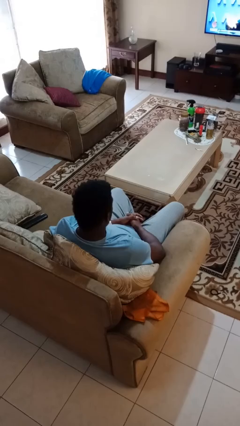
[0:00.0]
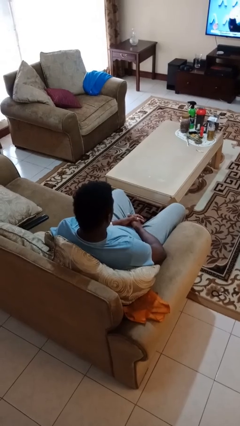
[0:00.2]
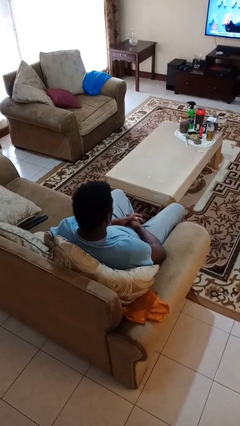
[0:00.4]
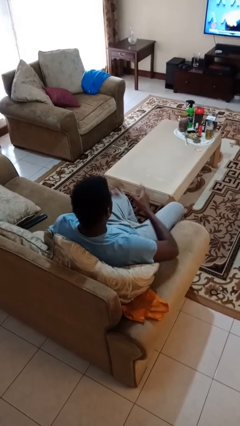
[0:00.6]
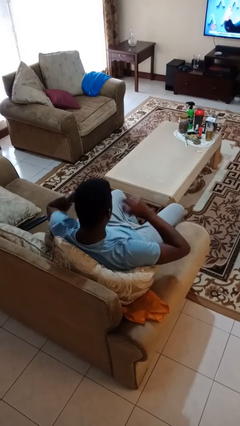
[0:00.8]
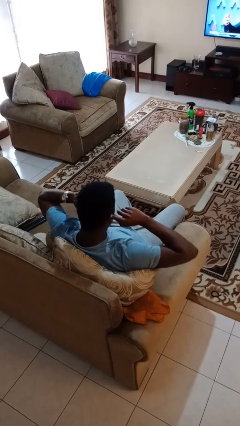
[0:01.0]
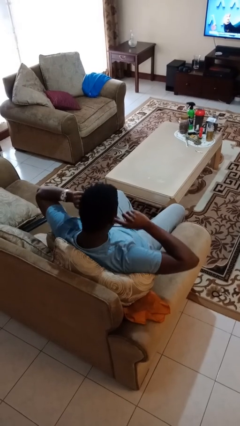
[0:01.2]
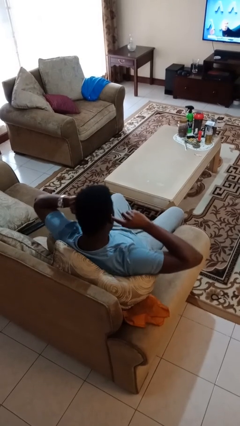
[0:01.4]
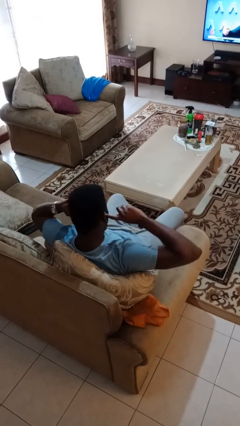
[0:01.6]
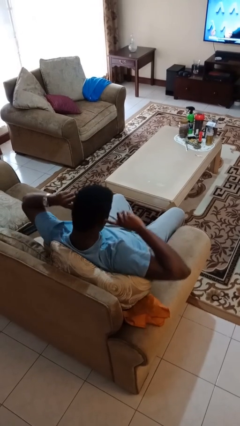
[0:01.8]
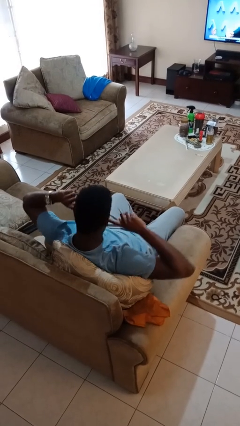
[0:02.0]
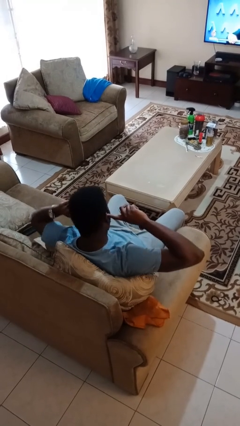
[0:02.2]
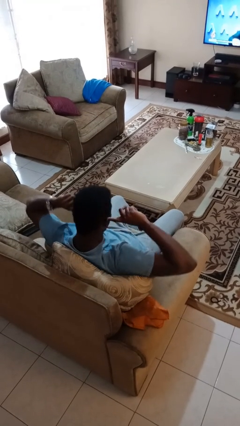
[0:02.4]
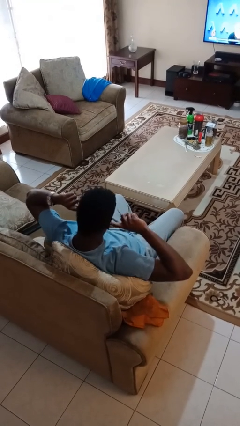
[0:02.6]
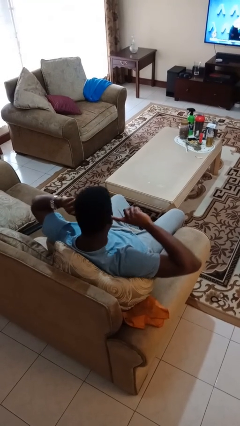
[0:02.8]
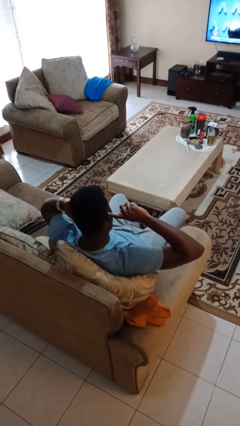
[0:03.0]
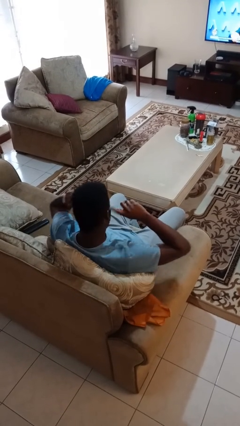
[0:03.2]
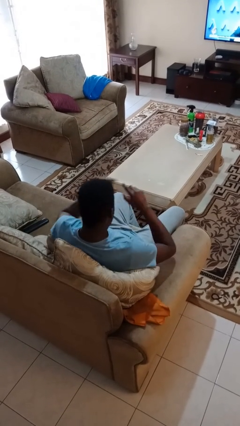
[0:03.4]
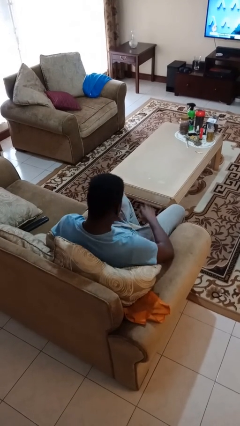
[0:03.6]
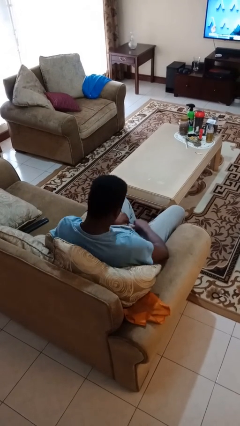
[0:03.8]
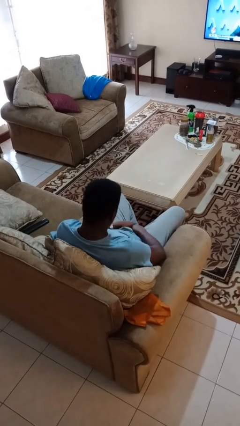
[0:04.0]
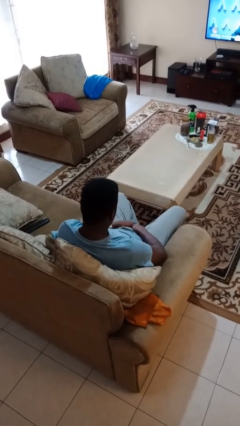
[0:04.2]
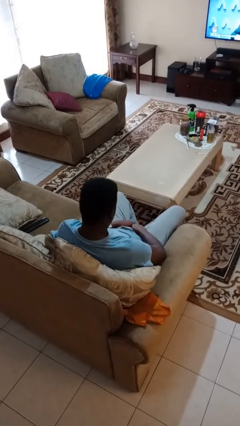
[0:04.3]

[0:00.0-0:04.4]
person puts fingers in ear

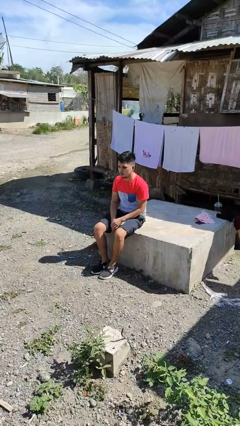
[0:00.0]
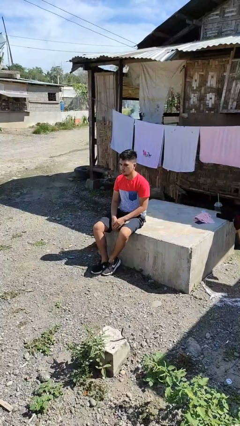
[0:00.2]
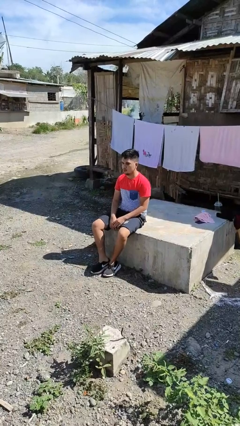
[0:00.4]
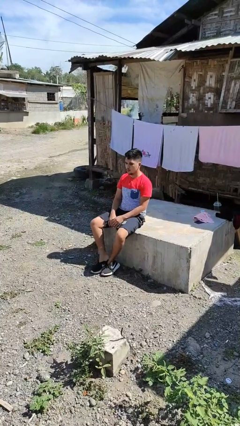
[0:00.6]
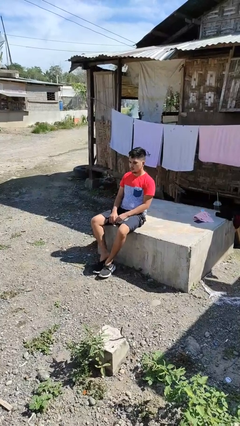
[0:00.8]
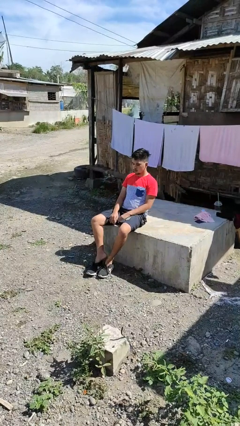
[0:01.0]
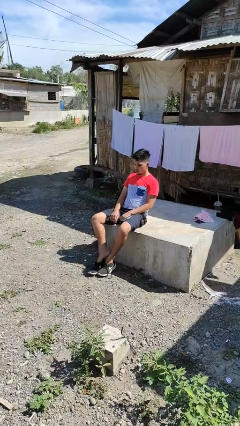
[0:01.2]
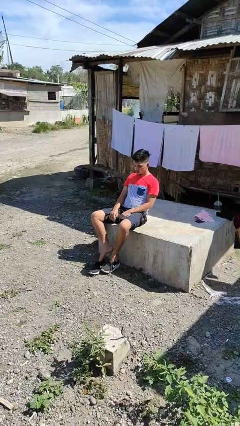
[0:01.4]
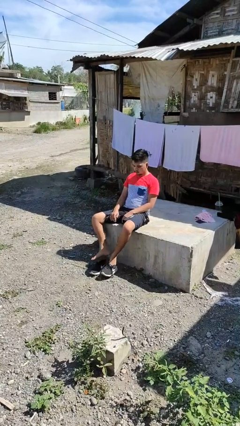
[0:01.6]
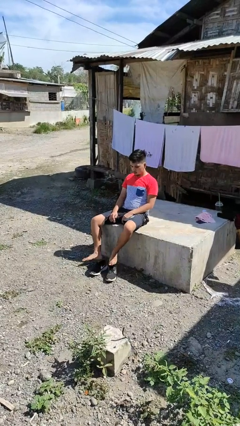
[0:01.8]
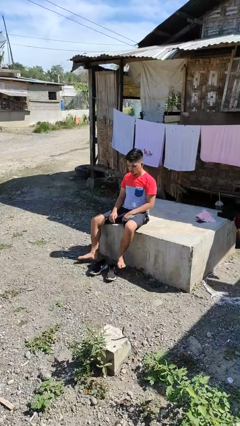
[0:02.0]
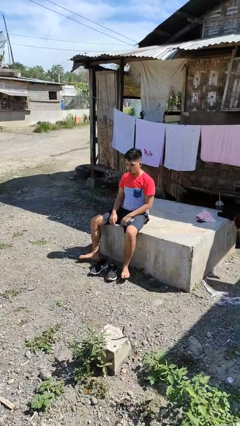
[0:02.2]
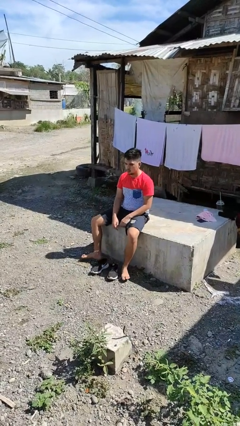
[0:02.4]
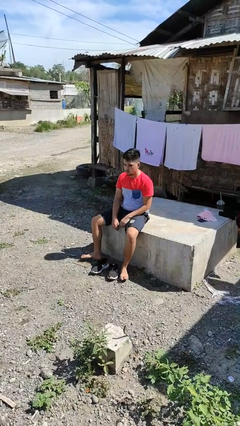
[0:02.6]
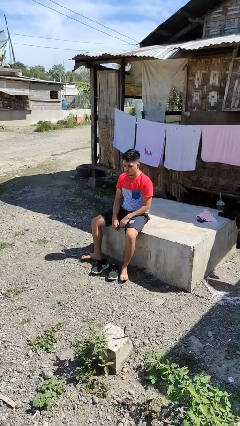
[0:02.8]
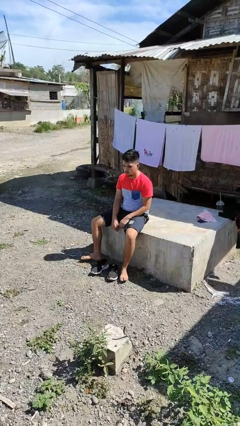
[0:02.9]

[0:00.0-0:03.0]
person takes off shoes

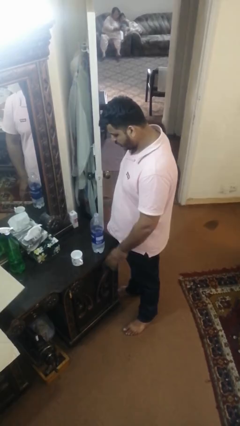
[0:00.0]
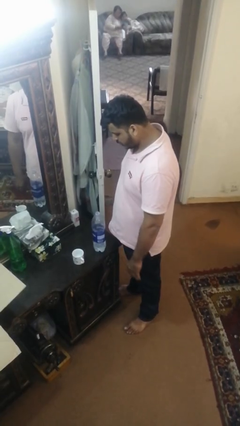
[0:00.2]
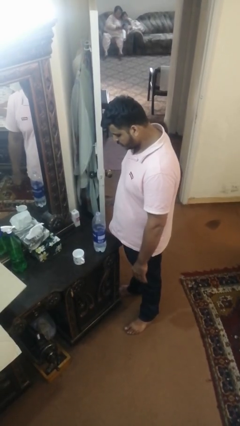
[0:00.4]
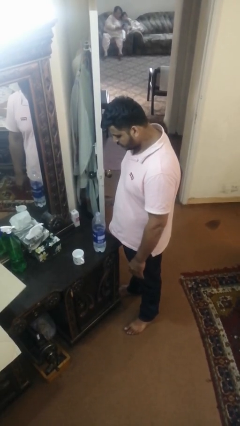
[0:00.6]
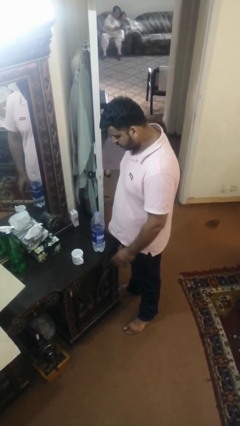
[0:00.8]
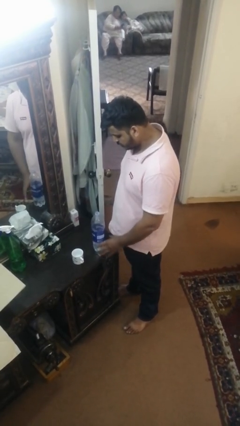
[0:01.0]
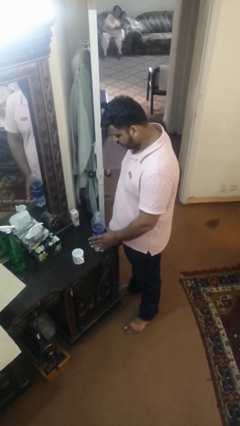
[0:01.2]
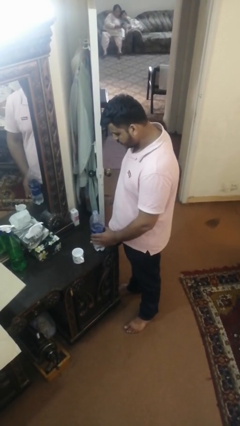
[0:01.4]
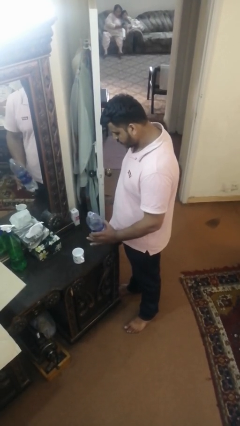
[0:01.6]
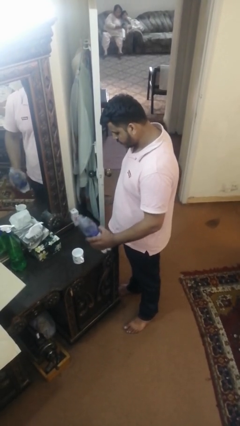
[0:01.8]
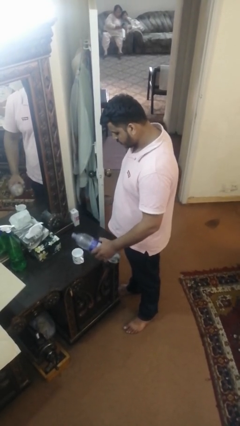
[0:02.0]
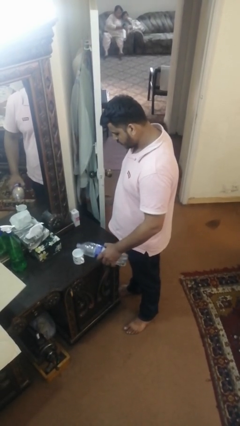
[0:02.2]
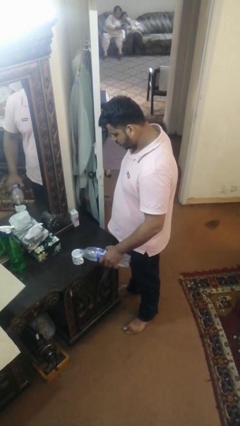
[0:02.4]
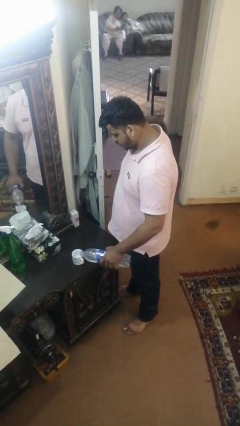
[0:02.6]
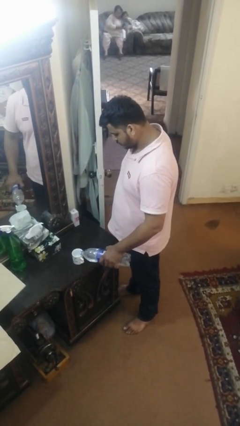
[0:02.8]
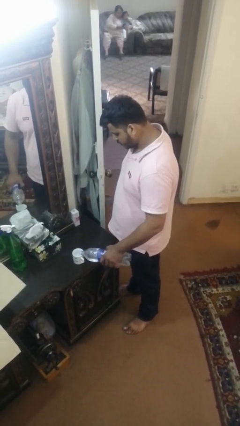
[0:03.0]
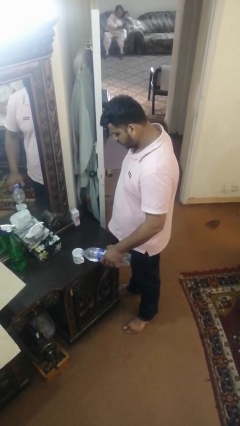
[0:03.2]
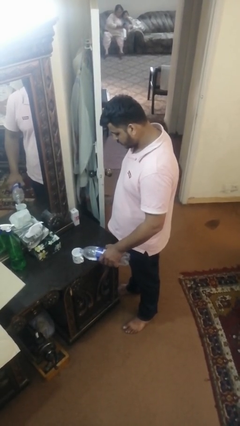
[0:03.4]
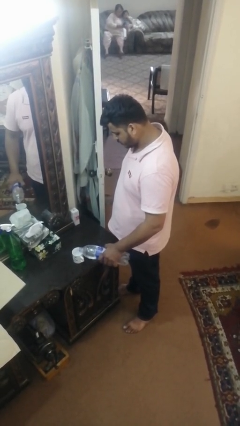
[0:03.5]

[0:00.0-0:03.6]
person pours liquid into cup

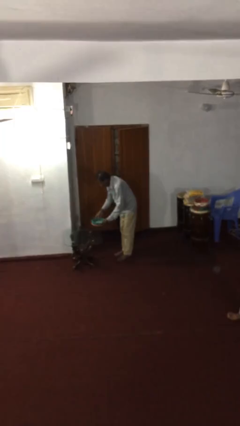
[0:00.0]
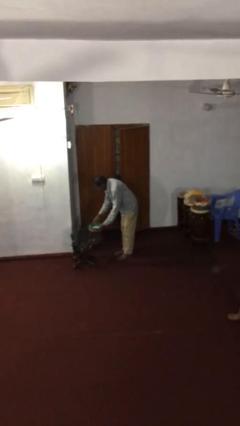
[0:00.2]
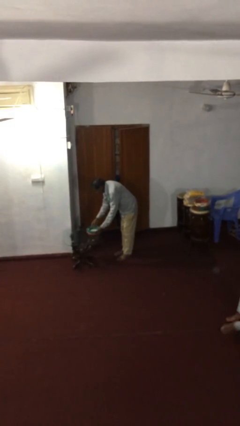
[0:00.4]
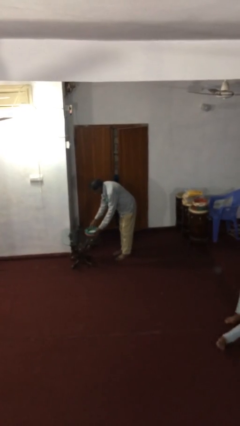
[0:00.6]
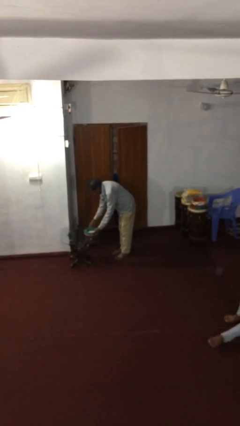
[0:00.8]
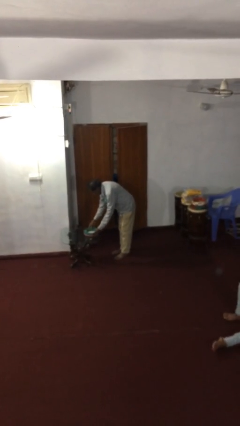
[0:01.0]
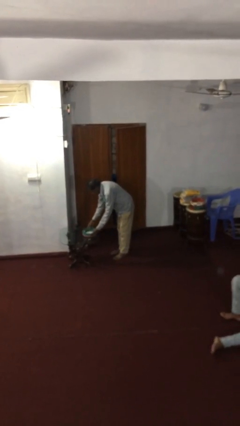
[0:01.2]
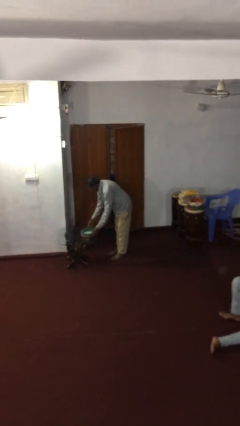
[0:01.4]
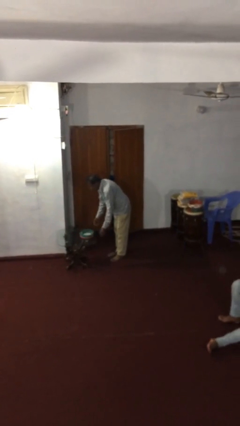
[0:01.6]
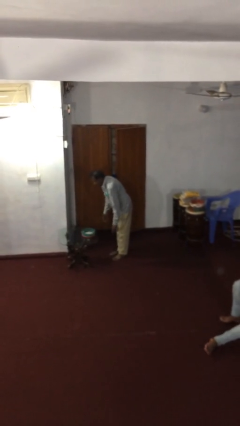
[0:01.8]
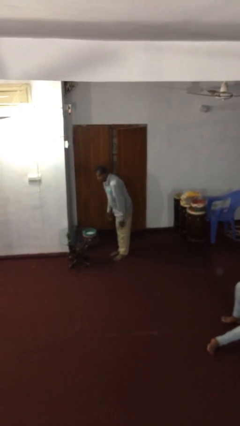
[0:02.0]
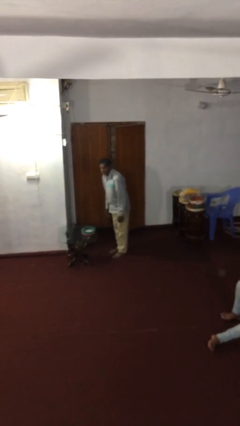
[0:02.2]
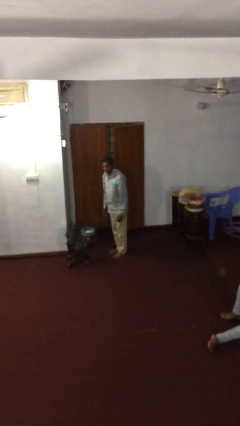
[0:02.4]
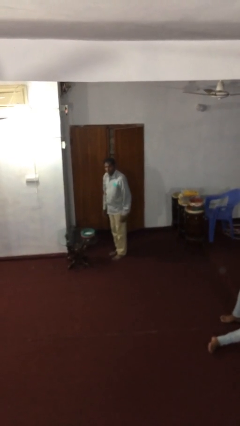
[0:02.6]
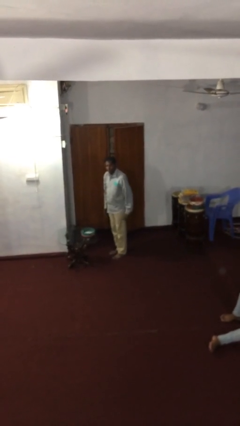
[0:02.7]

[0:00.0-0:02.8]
person puts down object on table

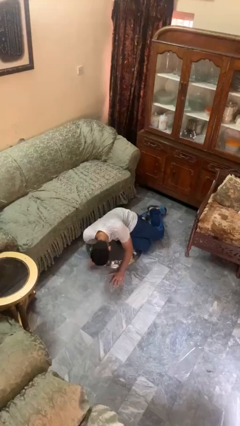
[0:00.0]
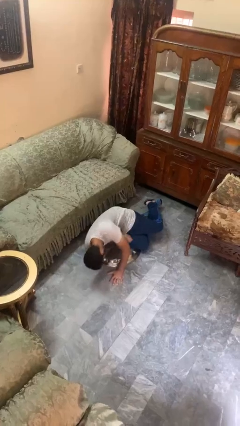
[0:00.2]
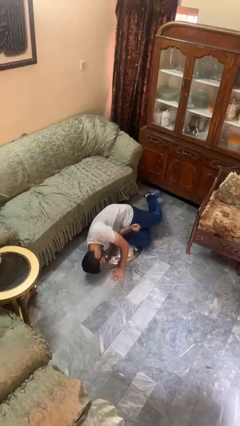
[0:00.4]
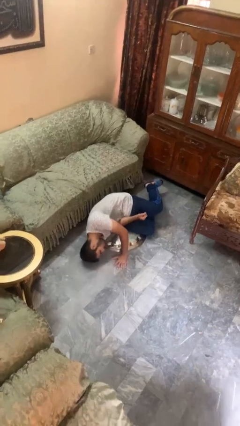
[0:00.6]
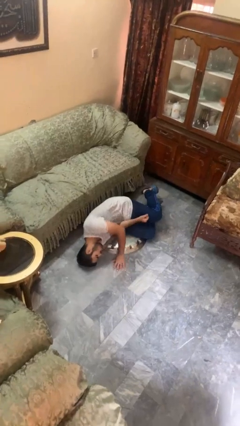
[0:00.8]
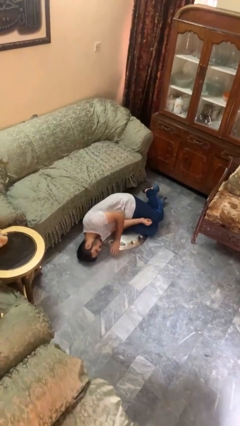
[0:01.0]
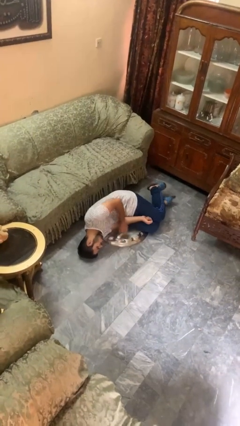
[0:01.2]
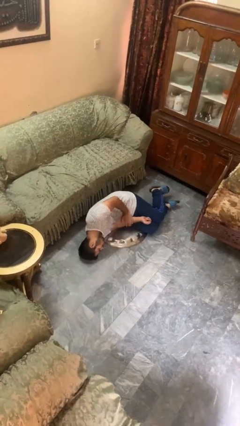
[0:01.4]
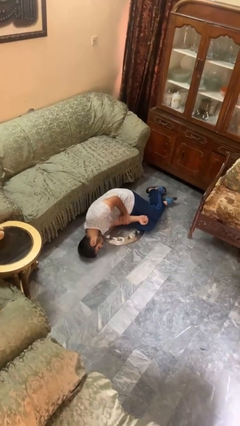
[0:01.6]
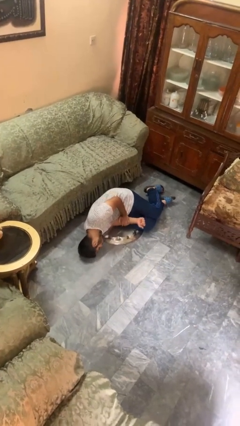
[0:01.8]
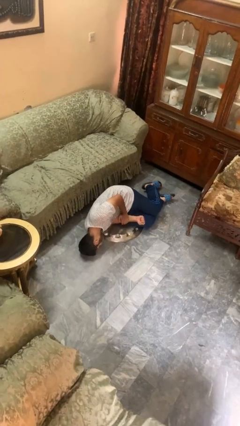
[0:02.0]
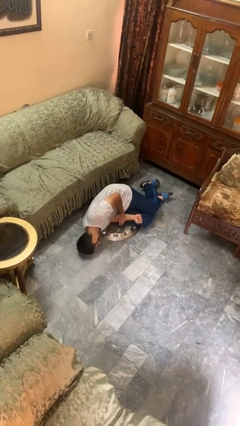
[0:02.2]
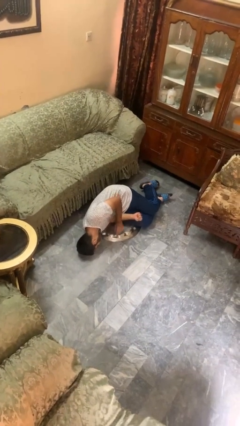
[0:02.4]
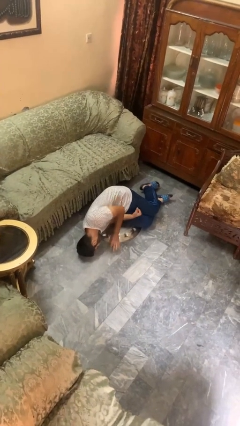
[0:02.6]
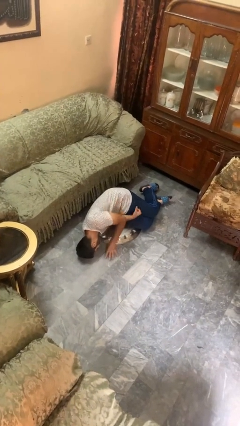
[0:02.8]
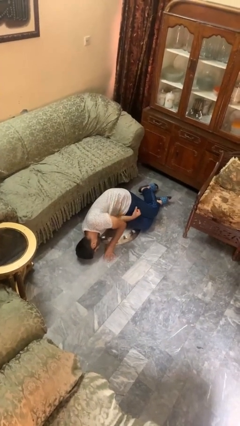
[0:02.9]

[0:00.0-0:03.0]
person lies down on floor

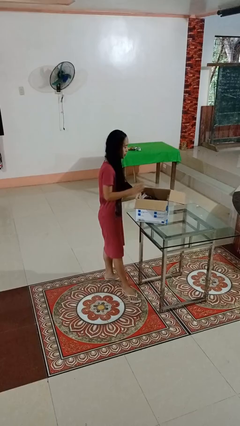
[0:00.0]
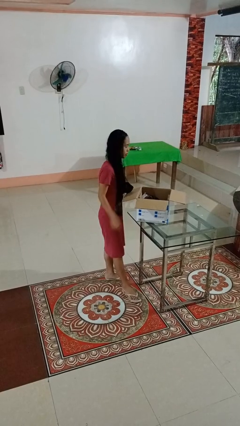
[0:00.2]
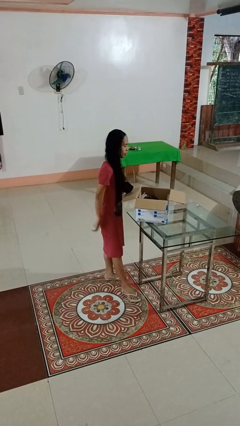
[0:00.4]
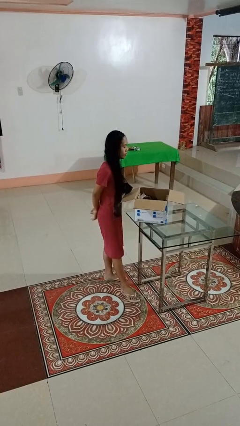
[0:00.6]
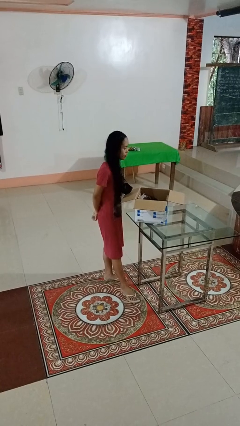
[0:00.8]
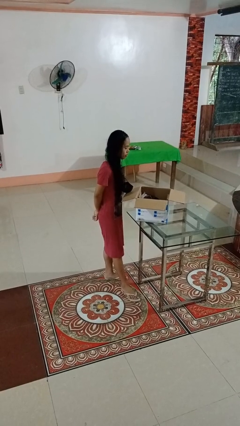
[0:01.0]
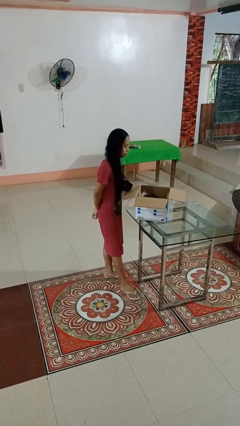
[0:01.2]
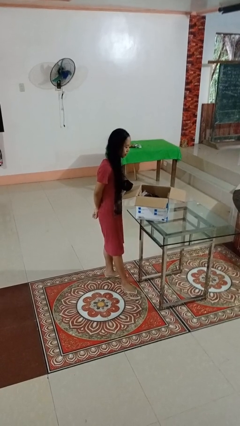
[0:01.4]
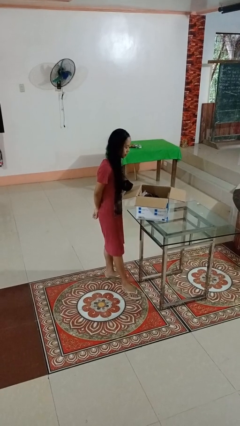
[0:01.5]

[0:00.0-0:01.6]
person puts object into box
